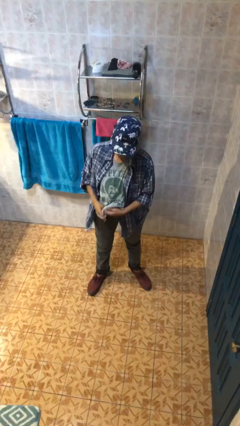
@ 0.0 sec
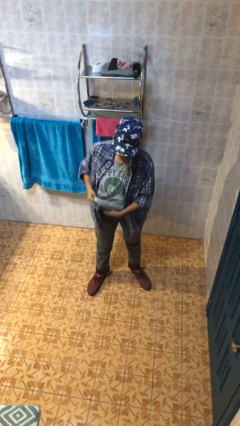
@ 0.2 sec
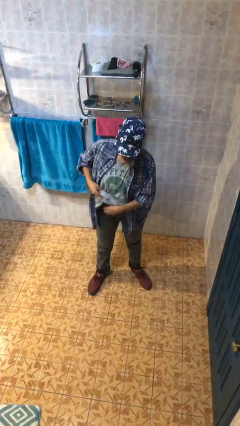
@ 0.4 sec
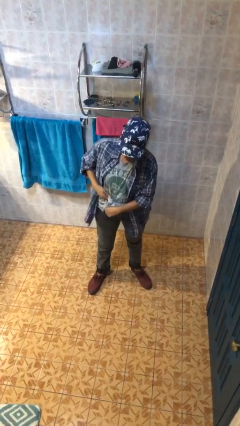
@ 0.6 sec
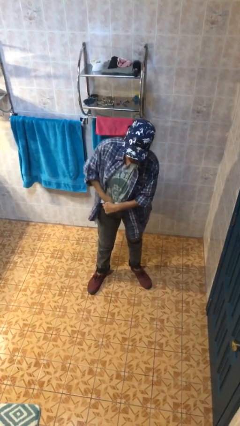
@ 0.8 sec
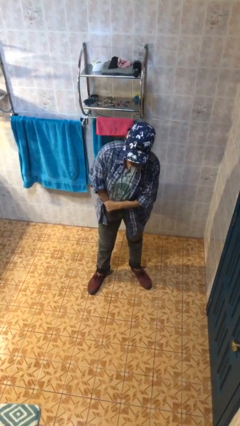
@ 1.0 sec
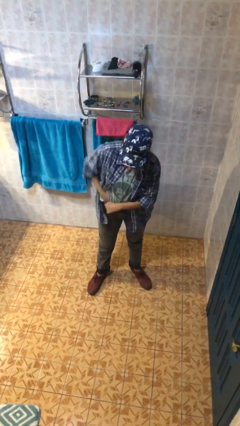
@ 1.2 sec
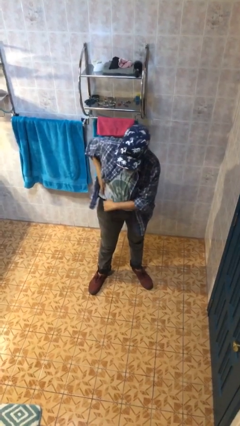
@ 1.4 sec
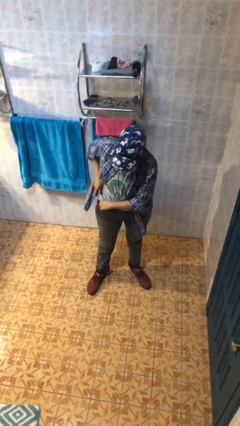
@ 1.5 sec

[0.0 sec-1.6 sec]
person tucks in shirt

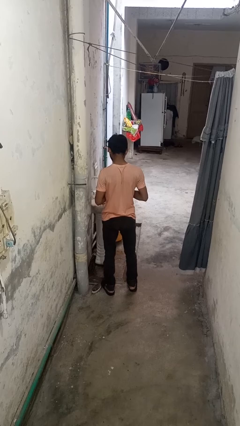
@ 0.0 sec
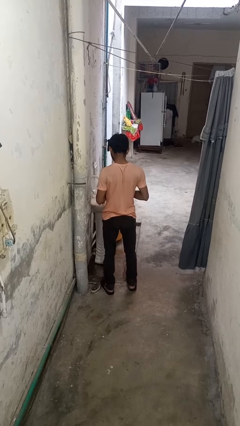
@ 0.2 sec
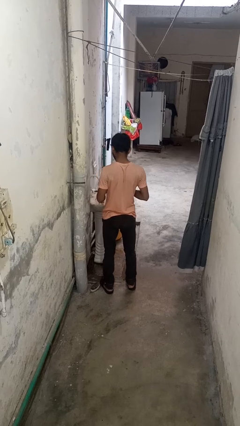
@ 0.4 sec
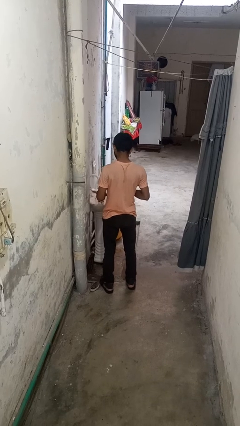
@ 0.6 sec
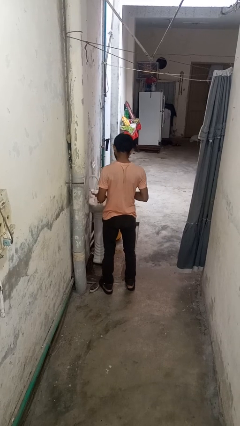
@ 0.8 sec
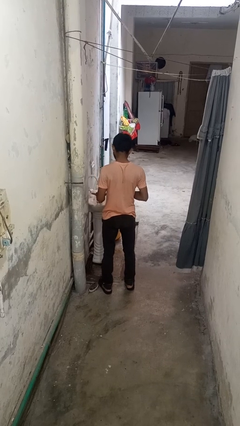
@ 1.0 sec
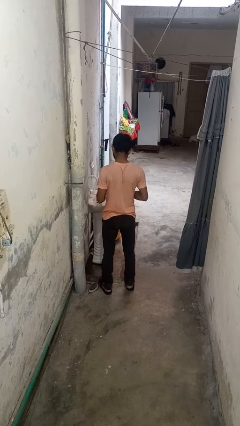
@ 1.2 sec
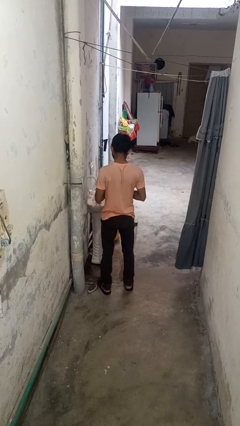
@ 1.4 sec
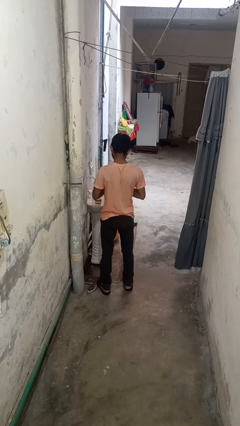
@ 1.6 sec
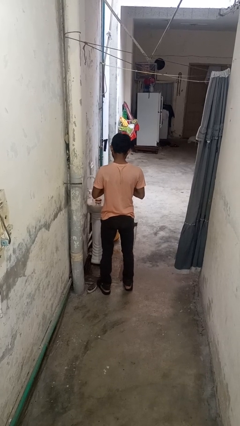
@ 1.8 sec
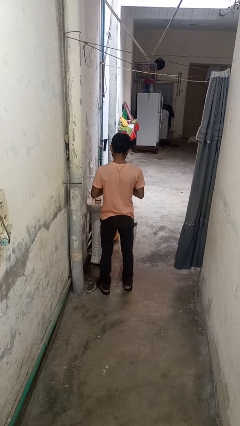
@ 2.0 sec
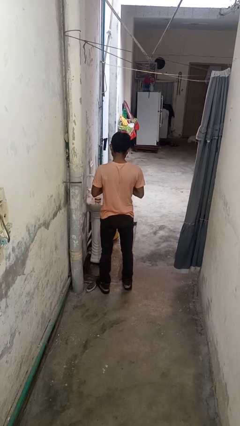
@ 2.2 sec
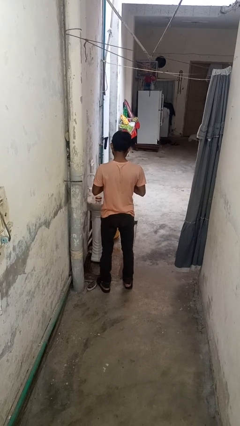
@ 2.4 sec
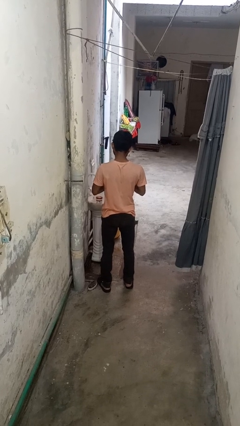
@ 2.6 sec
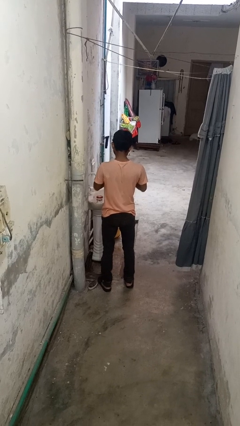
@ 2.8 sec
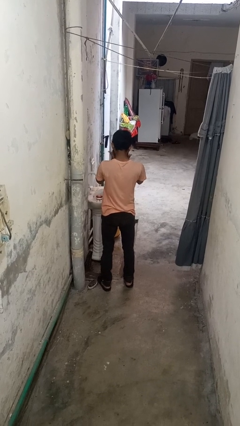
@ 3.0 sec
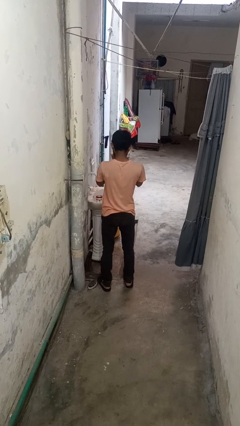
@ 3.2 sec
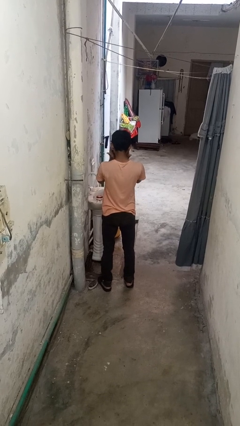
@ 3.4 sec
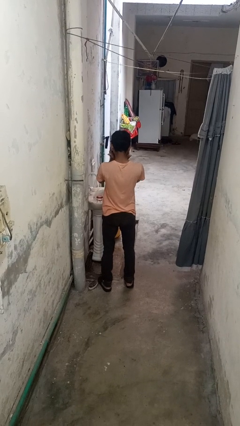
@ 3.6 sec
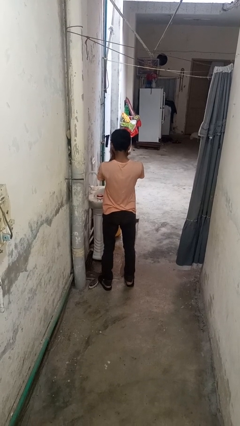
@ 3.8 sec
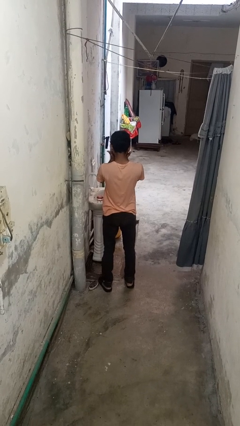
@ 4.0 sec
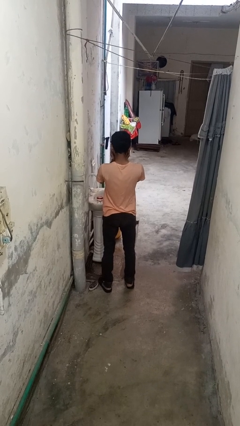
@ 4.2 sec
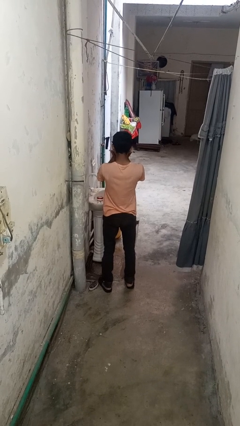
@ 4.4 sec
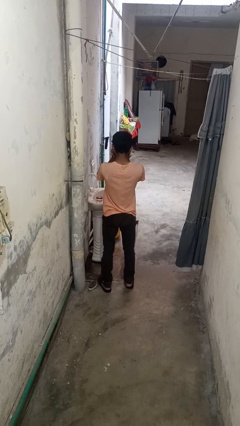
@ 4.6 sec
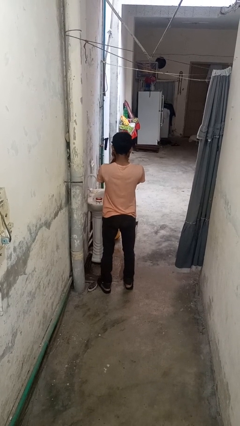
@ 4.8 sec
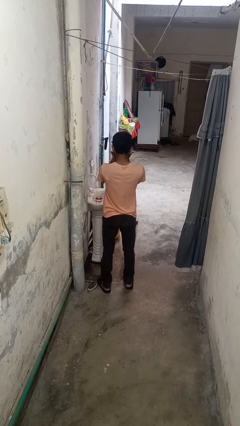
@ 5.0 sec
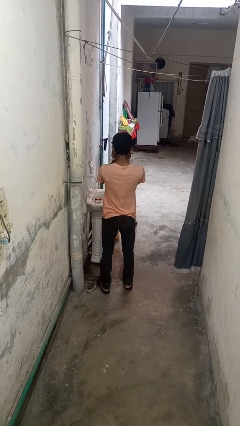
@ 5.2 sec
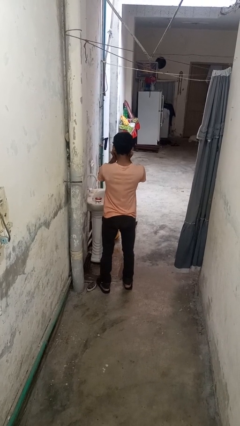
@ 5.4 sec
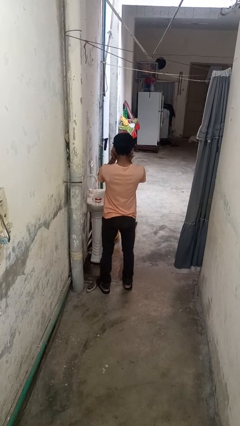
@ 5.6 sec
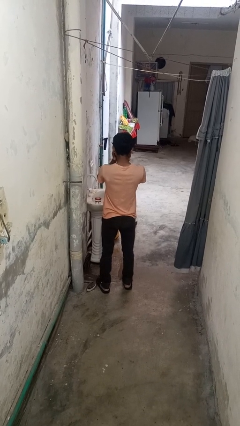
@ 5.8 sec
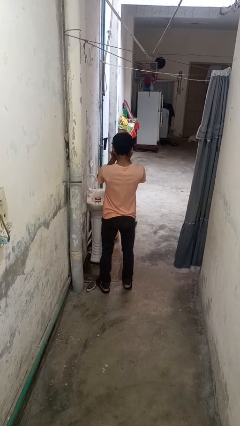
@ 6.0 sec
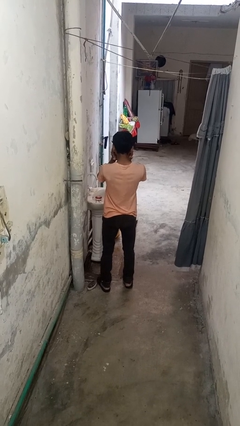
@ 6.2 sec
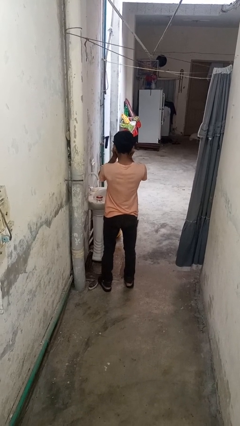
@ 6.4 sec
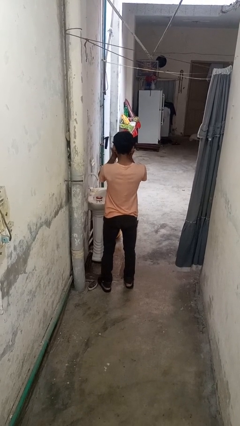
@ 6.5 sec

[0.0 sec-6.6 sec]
person applies facial moisturizer

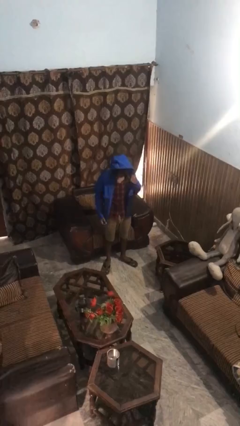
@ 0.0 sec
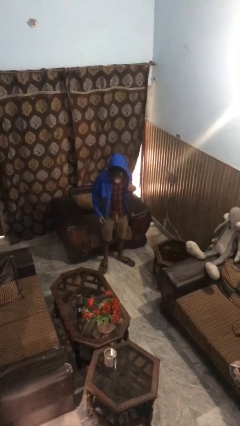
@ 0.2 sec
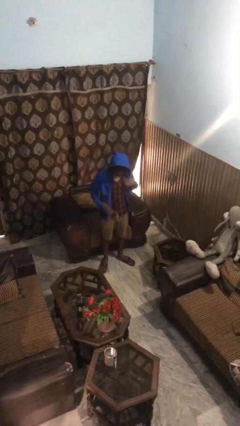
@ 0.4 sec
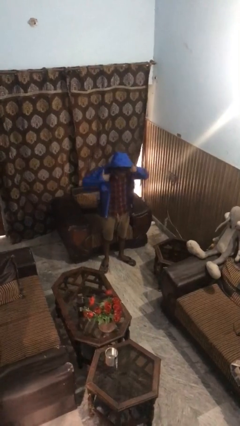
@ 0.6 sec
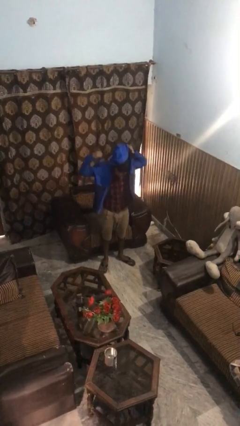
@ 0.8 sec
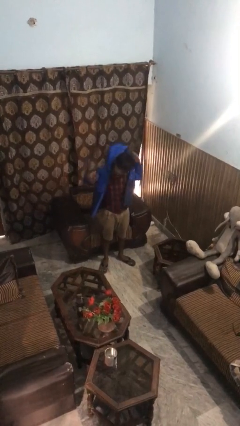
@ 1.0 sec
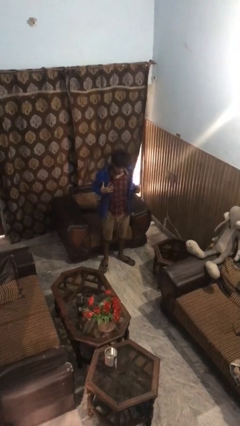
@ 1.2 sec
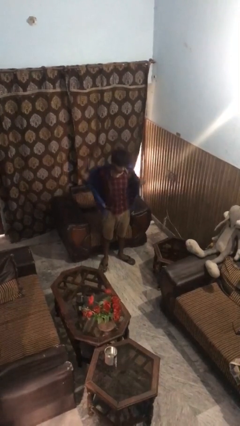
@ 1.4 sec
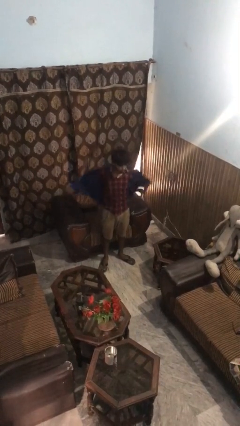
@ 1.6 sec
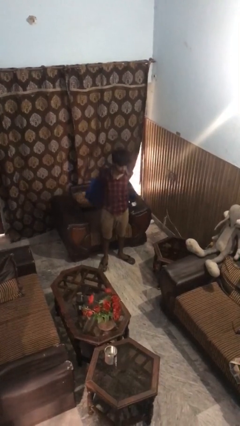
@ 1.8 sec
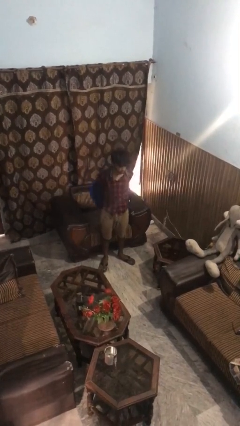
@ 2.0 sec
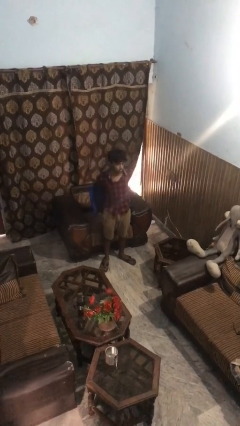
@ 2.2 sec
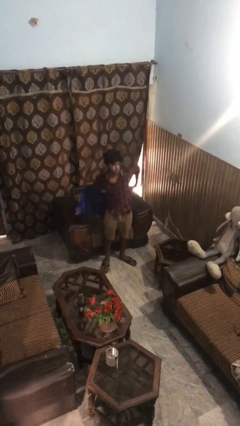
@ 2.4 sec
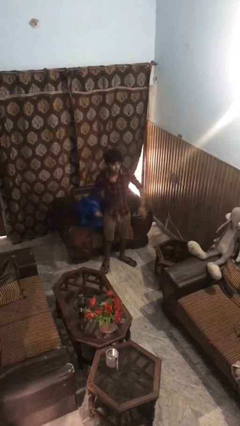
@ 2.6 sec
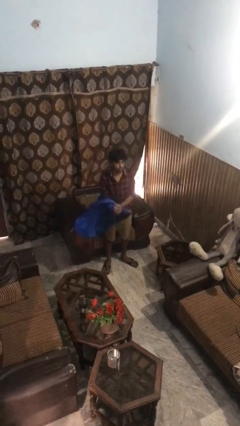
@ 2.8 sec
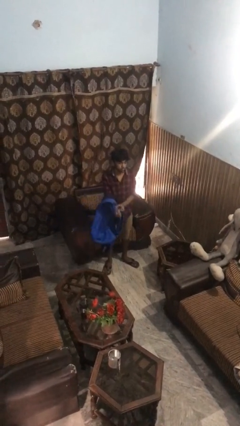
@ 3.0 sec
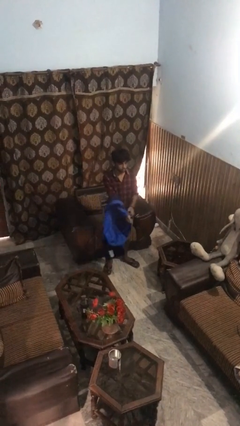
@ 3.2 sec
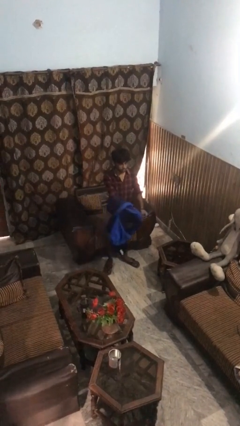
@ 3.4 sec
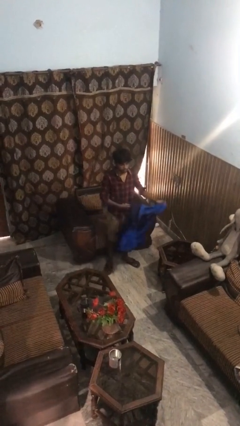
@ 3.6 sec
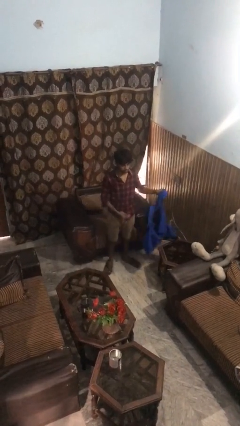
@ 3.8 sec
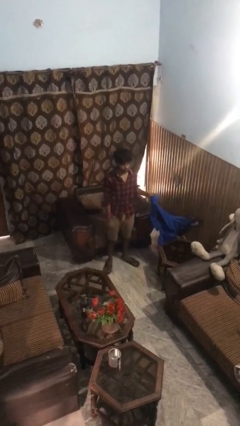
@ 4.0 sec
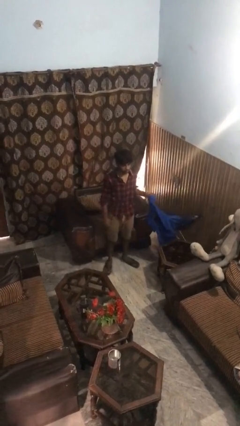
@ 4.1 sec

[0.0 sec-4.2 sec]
person takes off hoodie

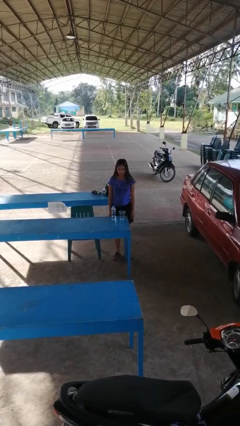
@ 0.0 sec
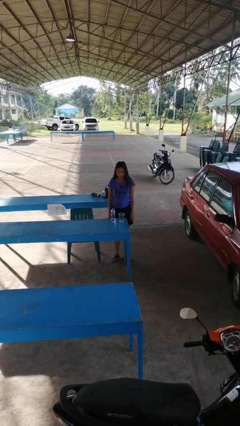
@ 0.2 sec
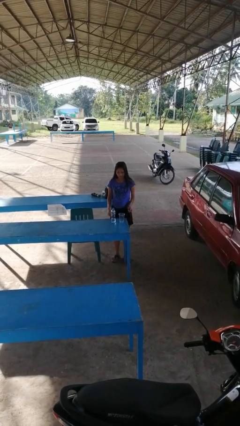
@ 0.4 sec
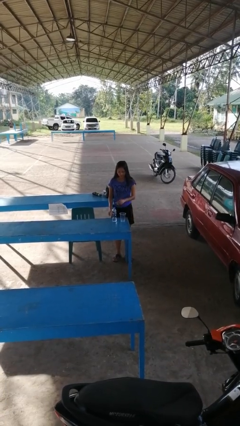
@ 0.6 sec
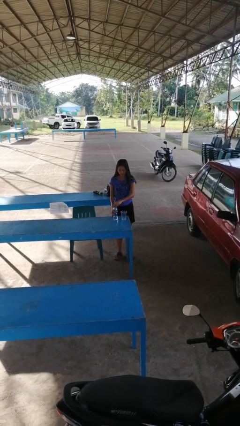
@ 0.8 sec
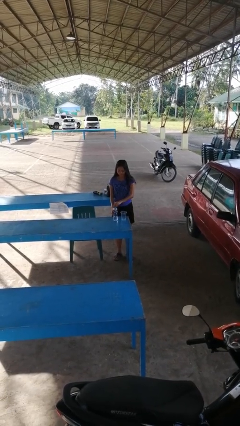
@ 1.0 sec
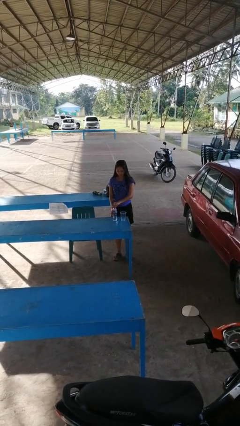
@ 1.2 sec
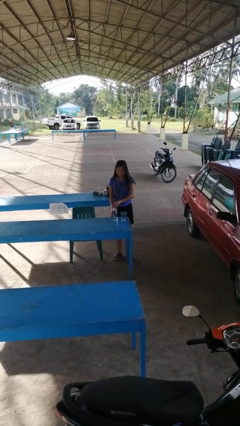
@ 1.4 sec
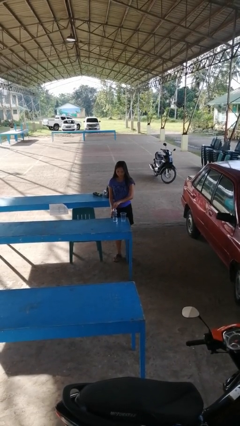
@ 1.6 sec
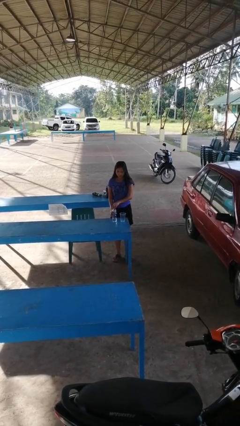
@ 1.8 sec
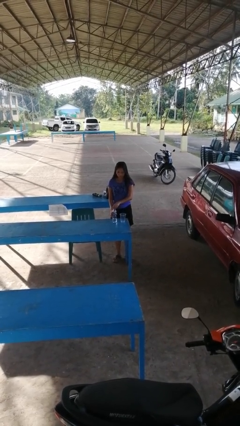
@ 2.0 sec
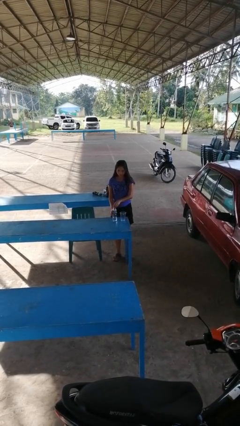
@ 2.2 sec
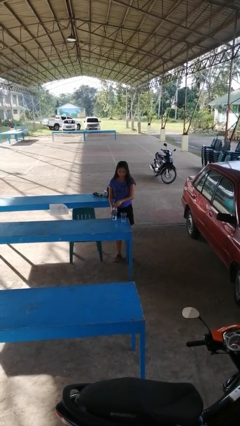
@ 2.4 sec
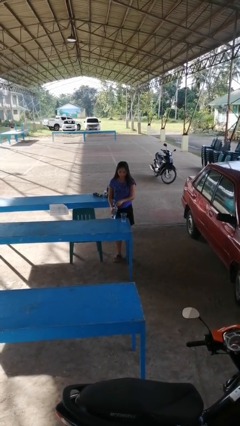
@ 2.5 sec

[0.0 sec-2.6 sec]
person unscrews lid from bottle

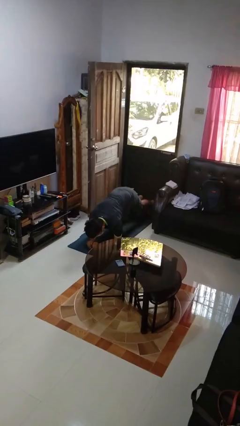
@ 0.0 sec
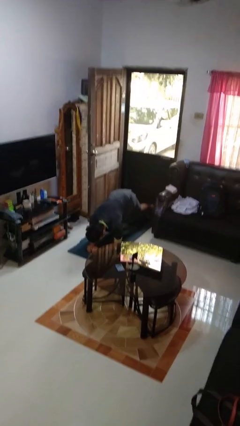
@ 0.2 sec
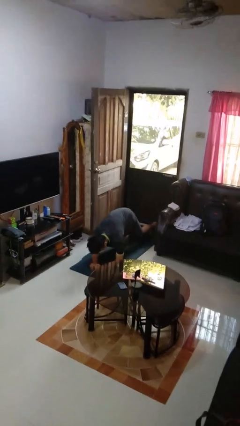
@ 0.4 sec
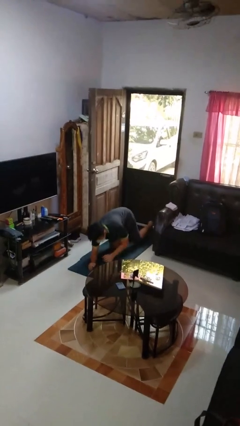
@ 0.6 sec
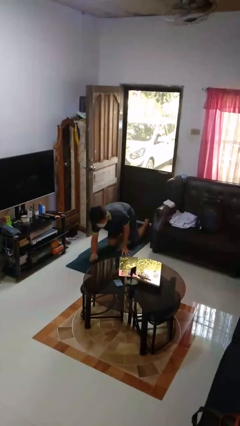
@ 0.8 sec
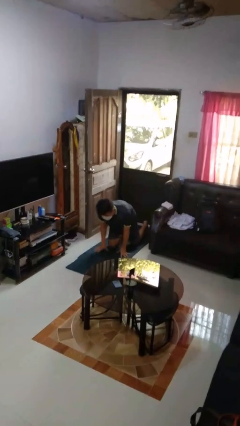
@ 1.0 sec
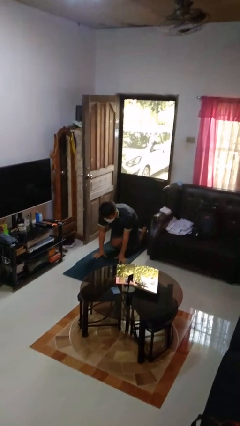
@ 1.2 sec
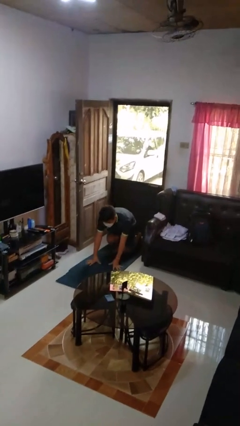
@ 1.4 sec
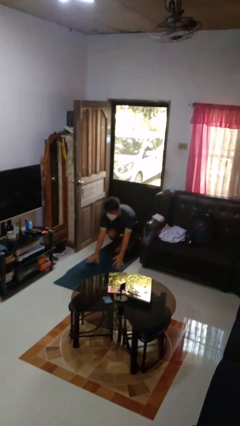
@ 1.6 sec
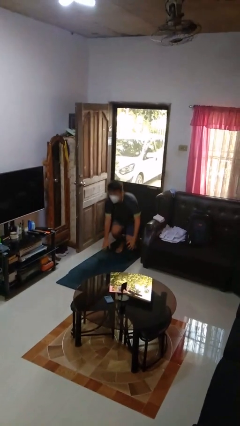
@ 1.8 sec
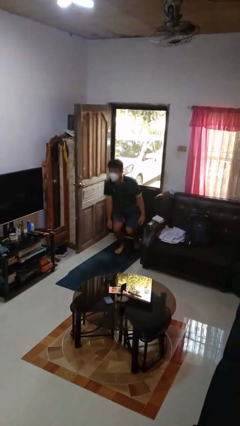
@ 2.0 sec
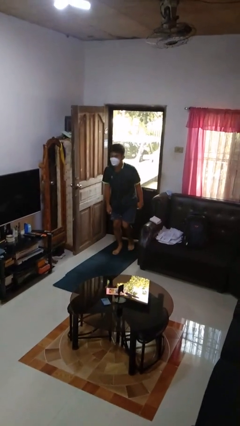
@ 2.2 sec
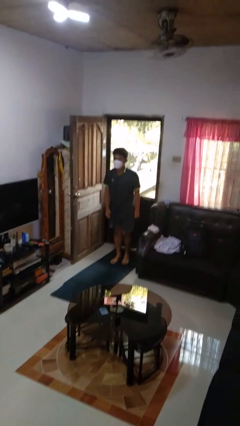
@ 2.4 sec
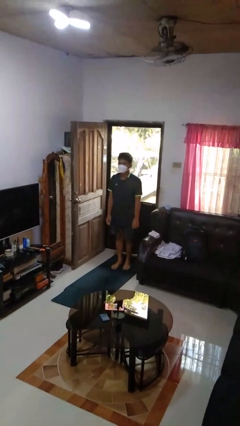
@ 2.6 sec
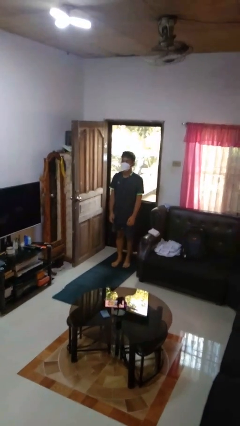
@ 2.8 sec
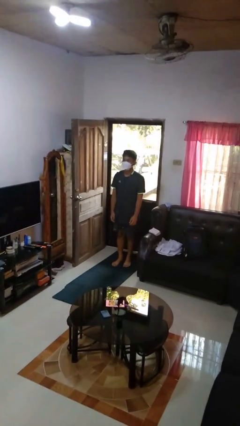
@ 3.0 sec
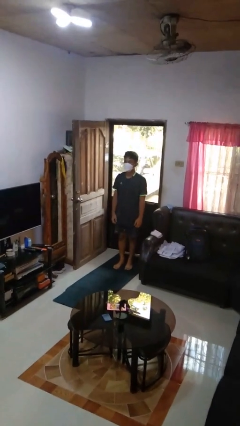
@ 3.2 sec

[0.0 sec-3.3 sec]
person stands up from floor
